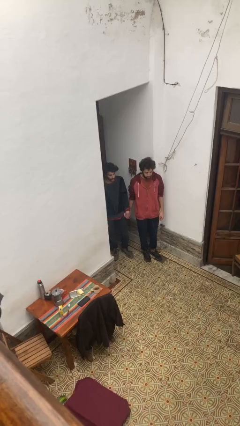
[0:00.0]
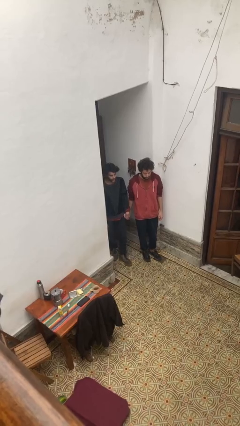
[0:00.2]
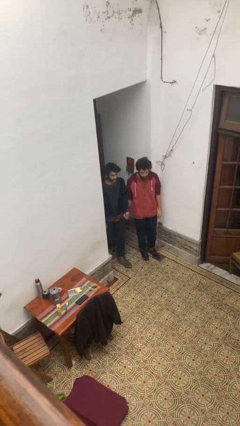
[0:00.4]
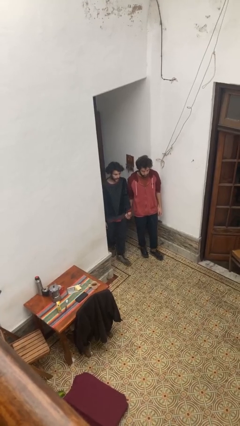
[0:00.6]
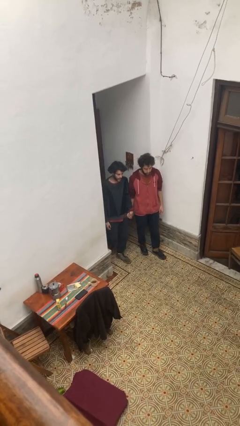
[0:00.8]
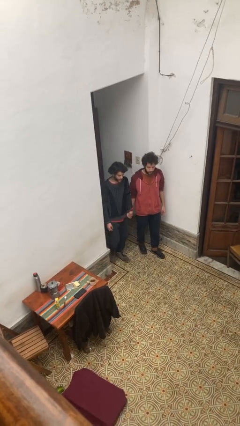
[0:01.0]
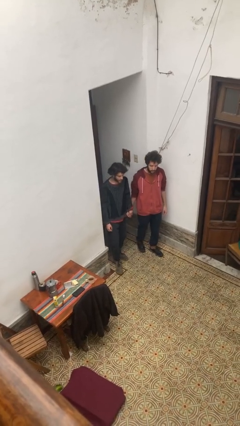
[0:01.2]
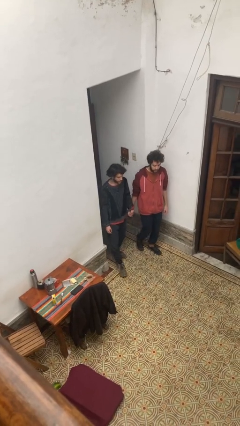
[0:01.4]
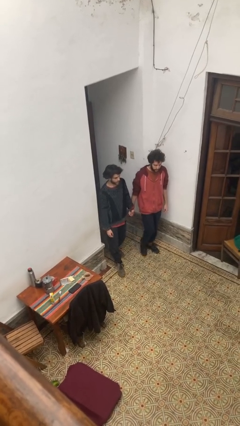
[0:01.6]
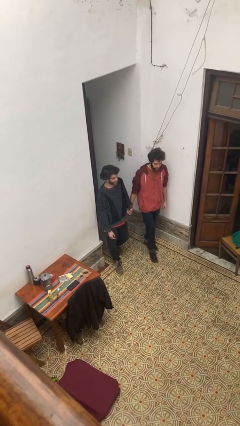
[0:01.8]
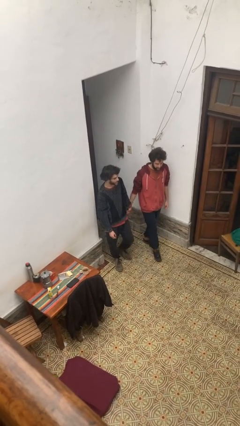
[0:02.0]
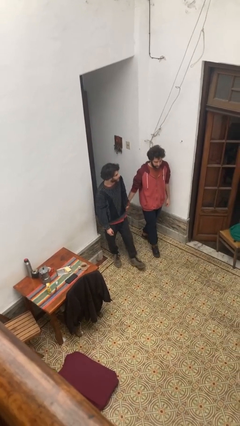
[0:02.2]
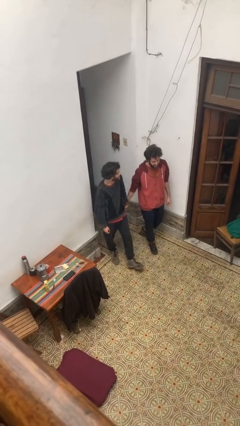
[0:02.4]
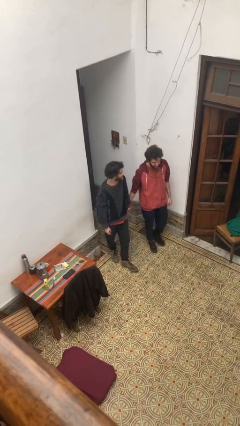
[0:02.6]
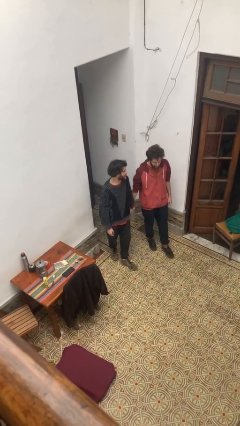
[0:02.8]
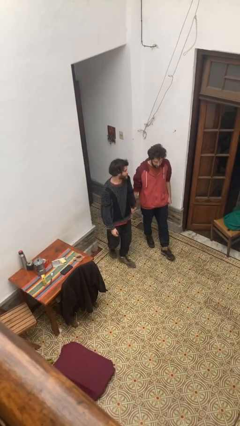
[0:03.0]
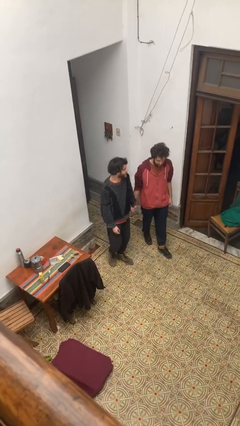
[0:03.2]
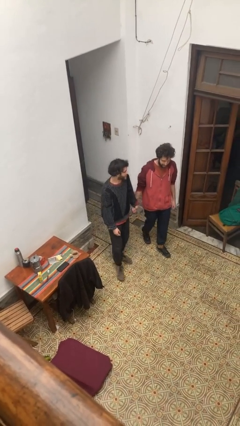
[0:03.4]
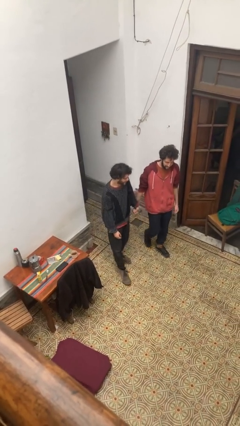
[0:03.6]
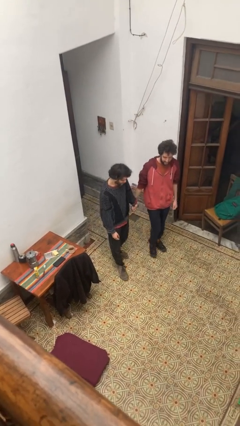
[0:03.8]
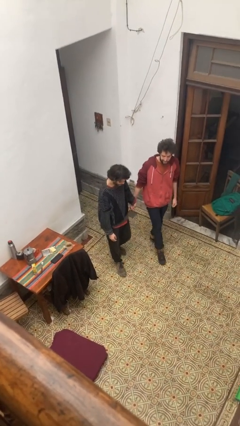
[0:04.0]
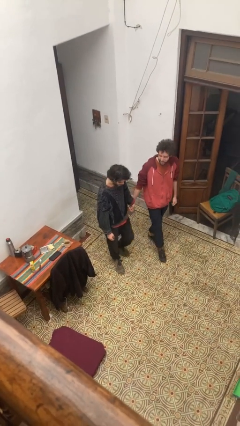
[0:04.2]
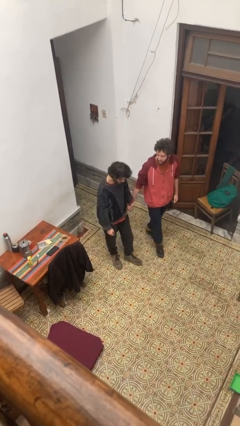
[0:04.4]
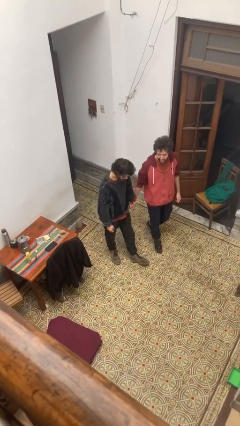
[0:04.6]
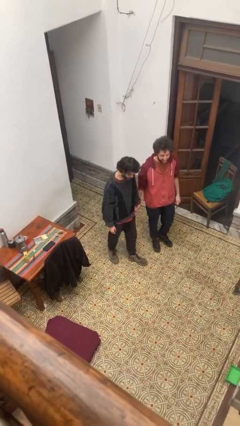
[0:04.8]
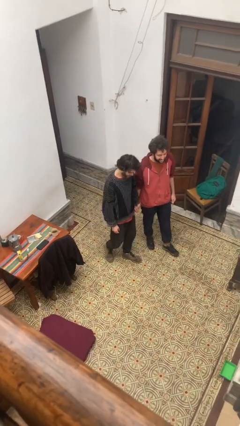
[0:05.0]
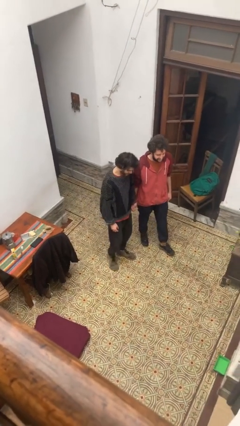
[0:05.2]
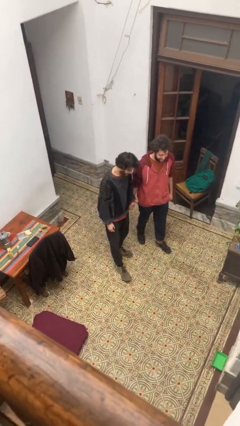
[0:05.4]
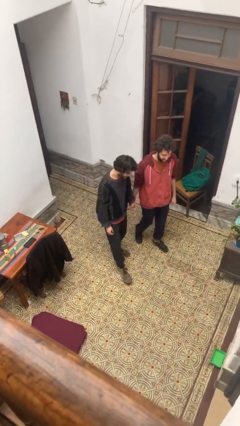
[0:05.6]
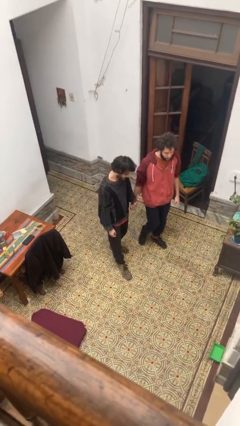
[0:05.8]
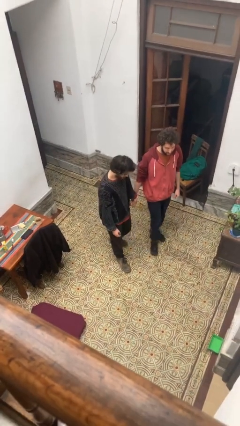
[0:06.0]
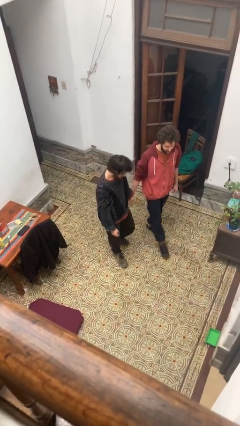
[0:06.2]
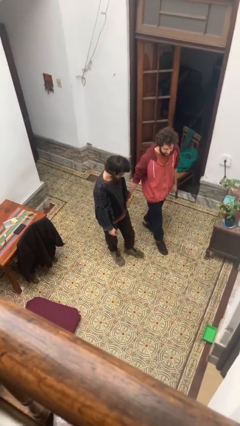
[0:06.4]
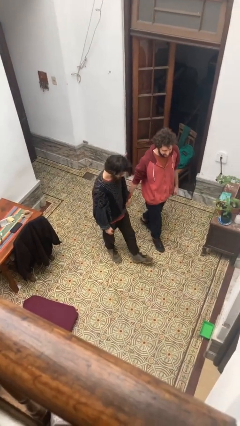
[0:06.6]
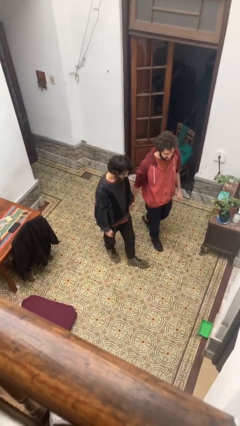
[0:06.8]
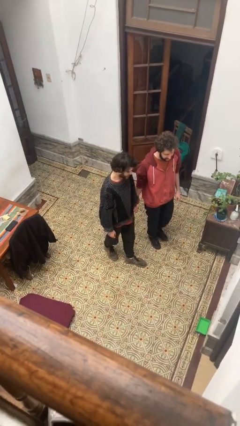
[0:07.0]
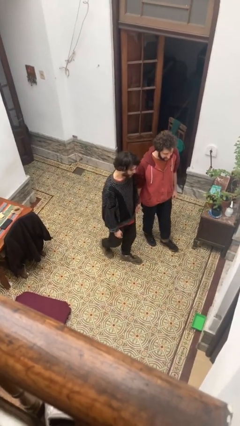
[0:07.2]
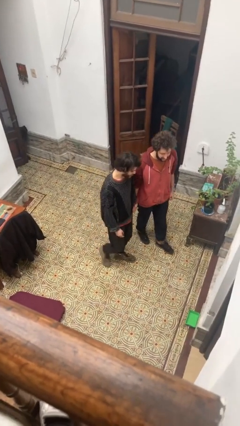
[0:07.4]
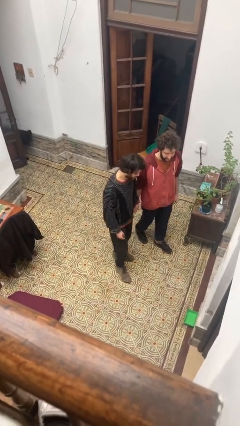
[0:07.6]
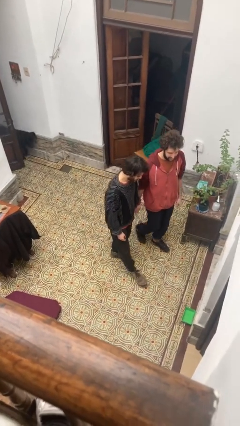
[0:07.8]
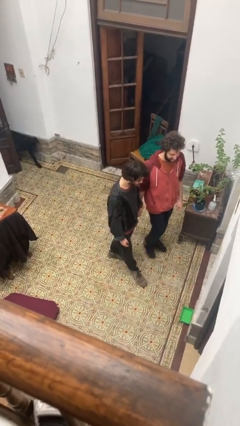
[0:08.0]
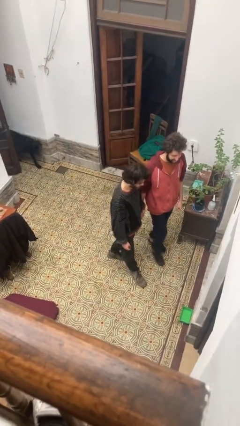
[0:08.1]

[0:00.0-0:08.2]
person holds hand

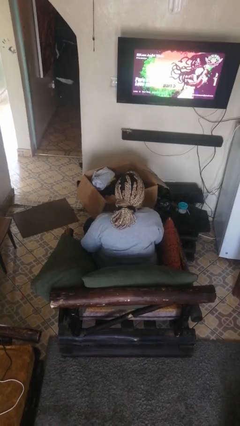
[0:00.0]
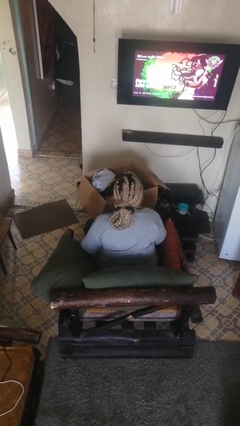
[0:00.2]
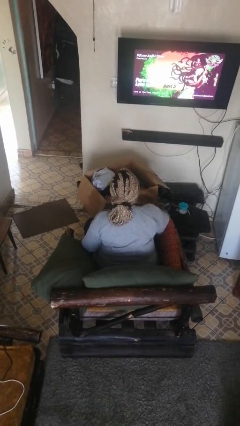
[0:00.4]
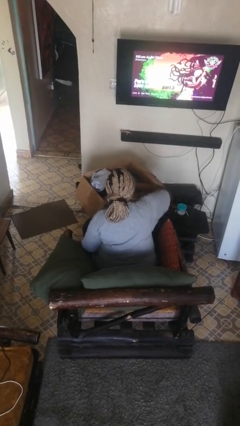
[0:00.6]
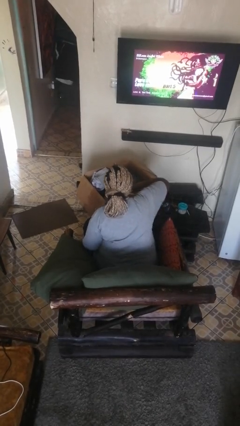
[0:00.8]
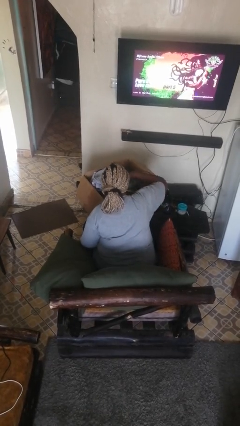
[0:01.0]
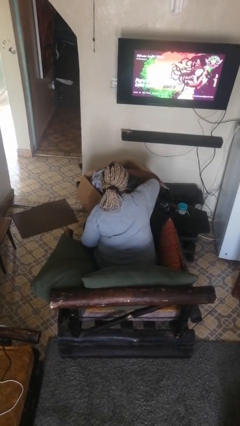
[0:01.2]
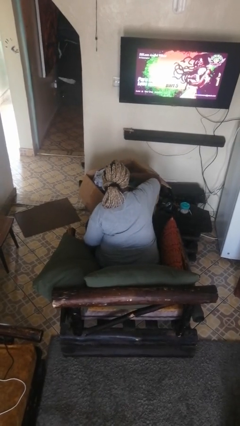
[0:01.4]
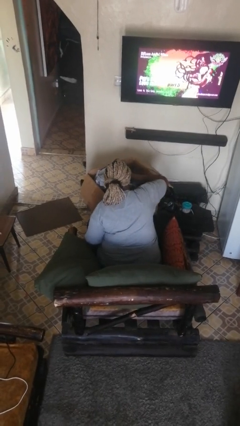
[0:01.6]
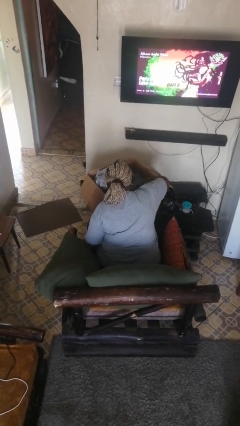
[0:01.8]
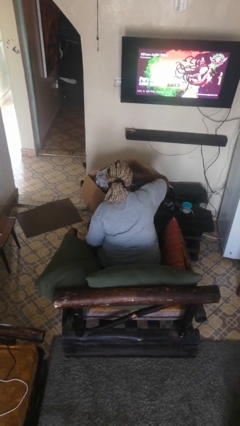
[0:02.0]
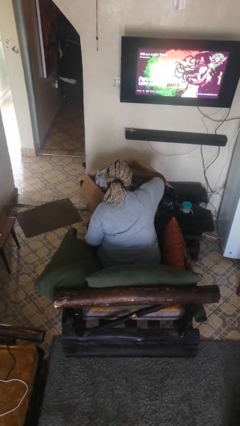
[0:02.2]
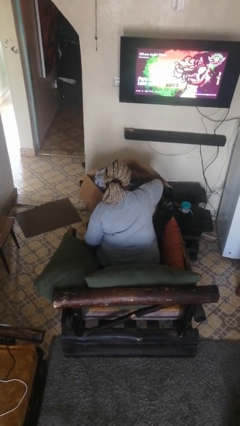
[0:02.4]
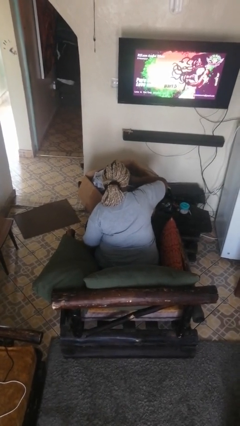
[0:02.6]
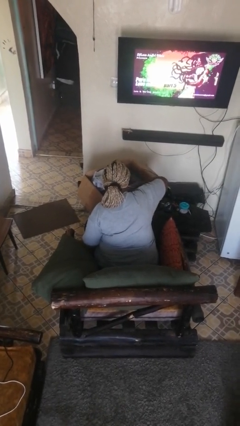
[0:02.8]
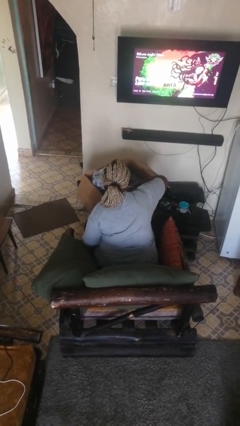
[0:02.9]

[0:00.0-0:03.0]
person searches in box

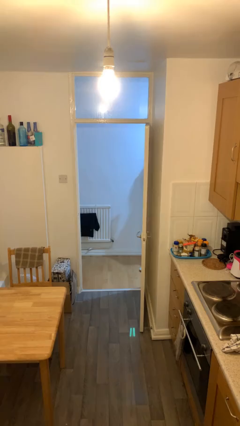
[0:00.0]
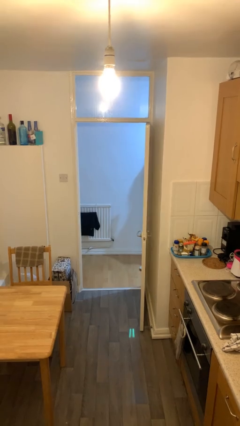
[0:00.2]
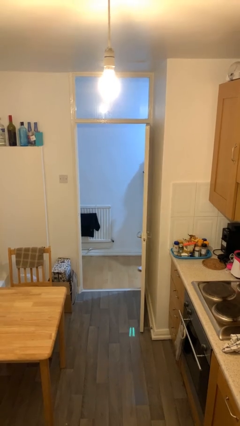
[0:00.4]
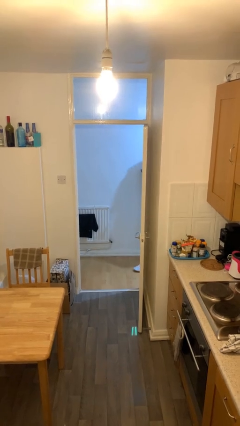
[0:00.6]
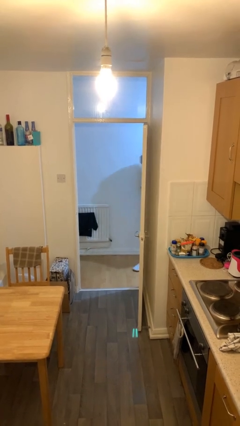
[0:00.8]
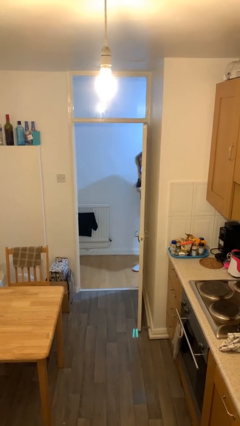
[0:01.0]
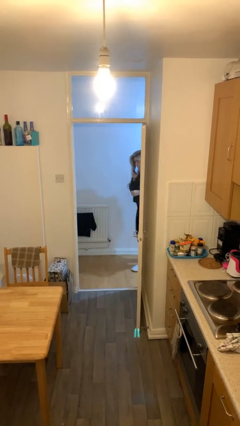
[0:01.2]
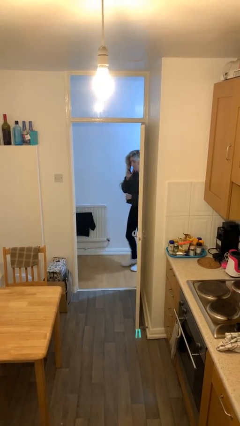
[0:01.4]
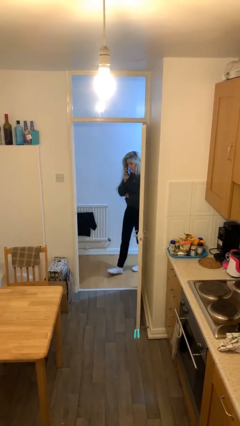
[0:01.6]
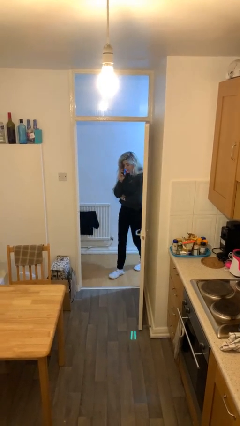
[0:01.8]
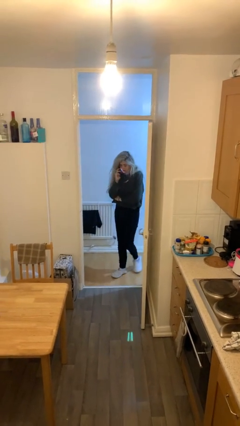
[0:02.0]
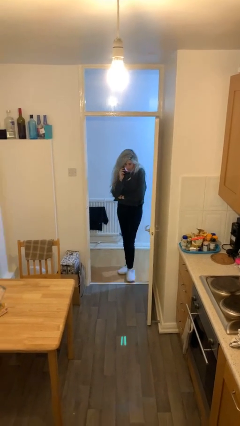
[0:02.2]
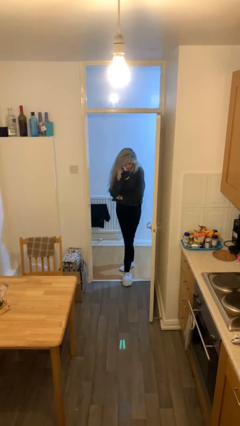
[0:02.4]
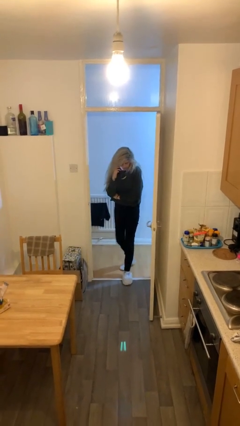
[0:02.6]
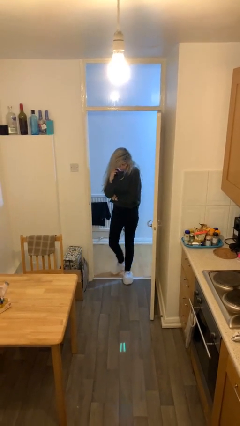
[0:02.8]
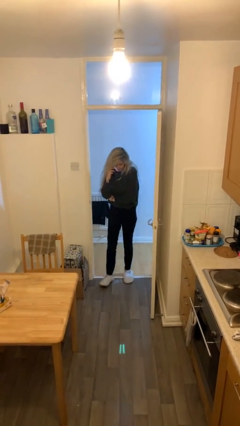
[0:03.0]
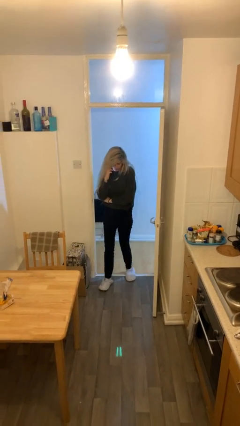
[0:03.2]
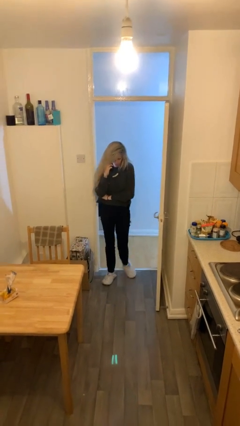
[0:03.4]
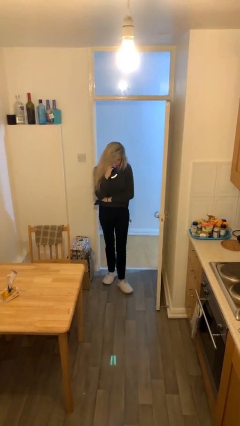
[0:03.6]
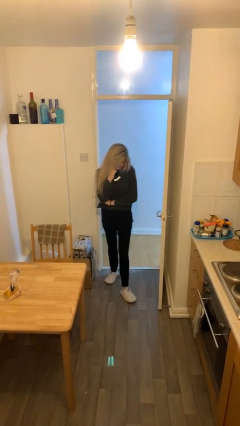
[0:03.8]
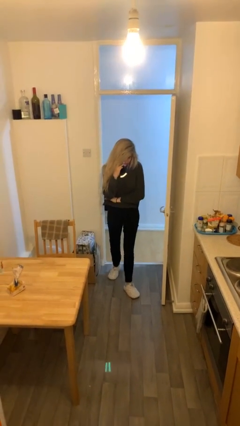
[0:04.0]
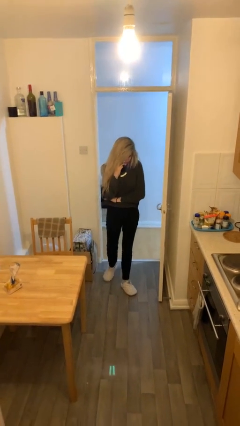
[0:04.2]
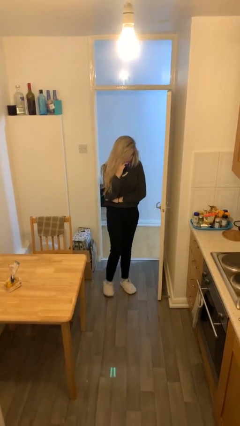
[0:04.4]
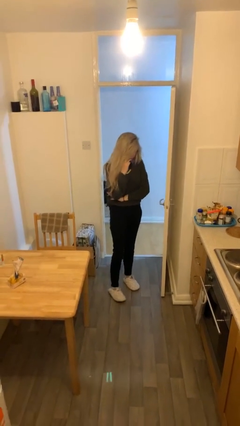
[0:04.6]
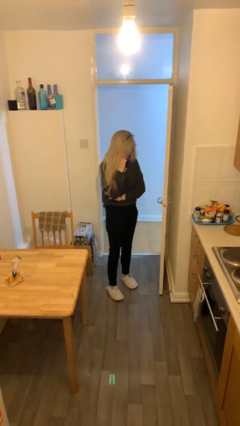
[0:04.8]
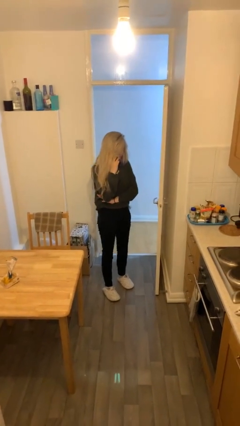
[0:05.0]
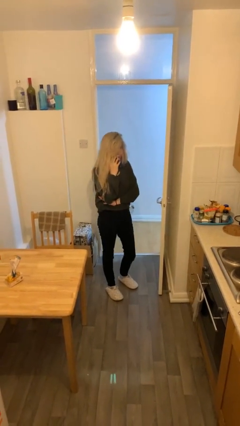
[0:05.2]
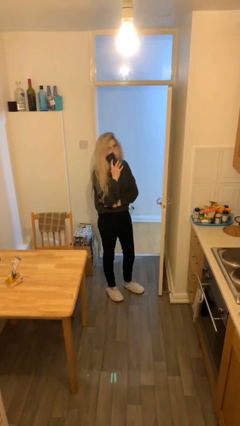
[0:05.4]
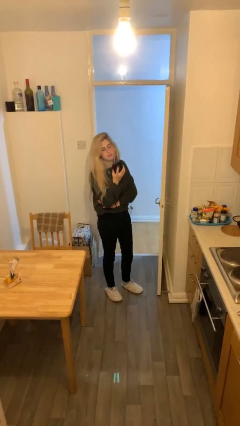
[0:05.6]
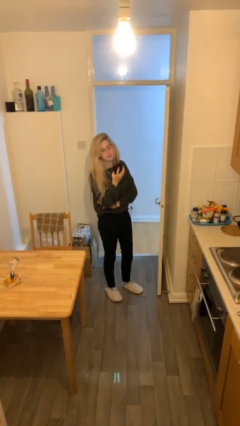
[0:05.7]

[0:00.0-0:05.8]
person enters scene through structure

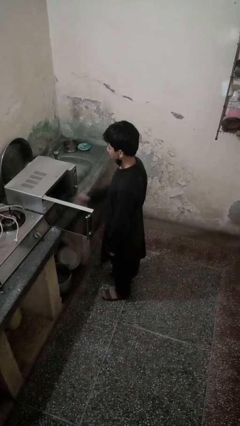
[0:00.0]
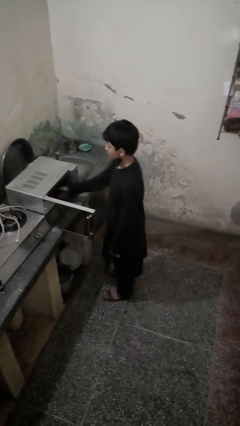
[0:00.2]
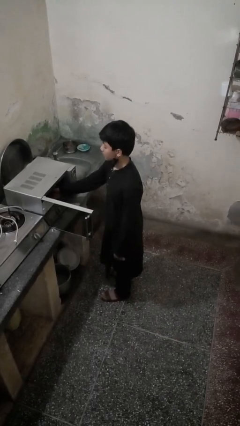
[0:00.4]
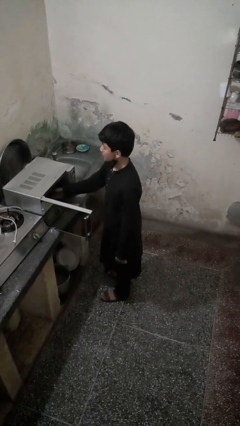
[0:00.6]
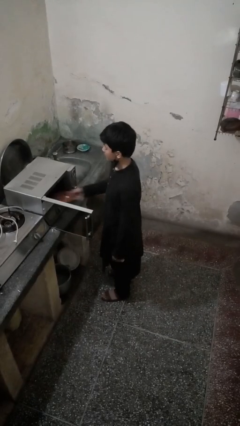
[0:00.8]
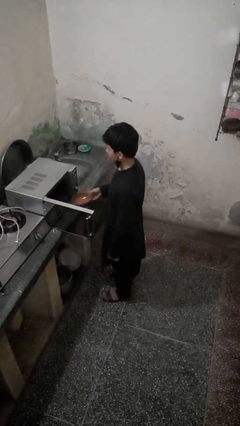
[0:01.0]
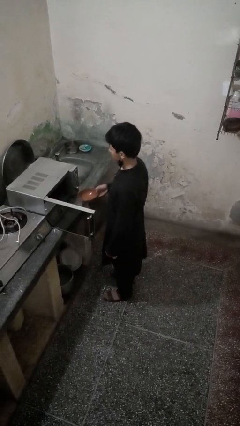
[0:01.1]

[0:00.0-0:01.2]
person takes object from microwave
